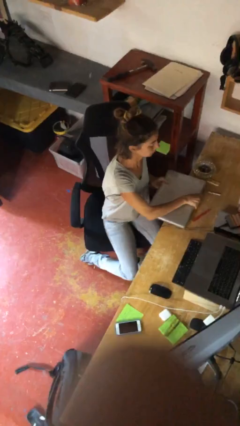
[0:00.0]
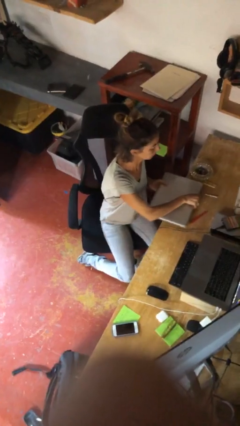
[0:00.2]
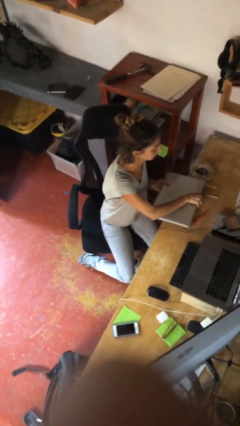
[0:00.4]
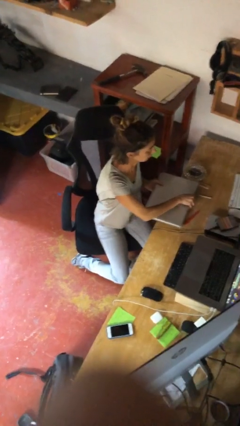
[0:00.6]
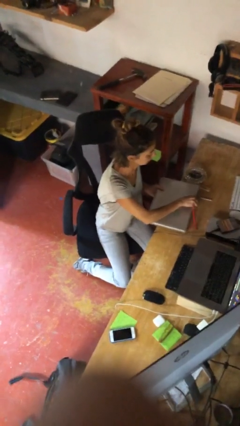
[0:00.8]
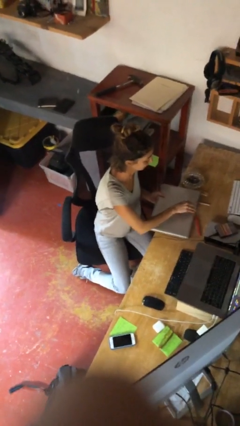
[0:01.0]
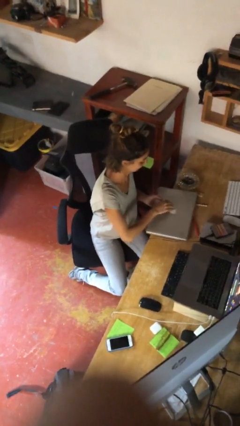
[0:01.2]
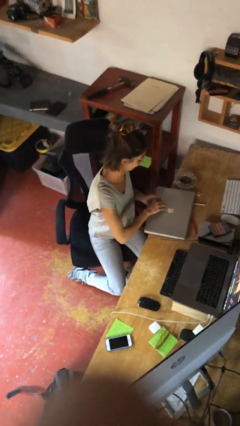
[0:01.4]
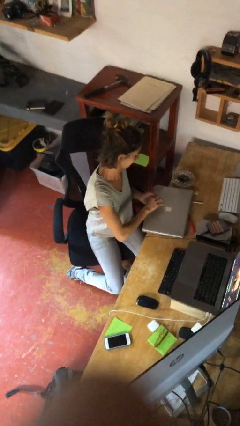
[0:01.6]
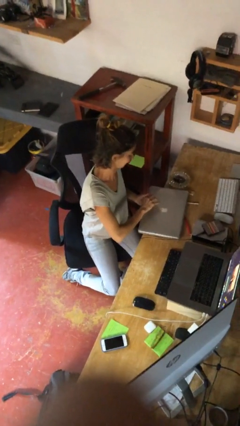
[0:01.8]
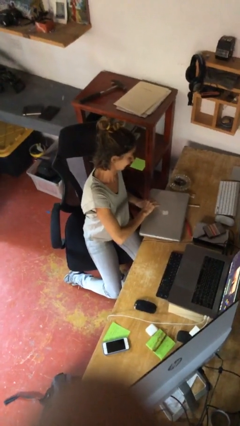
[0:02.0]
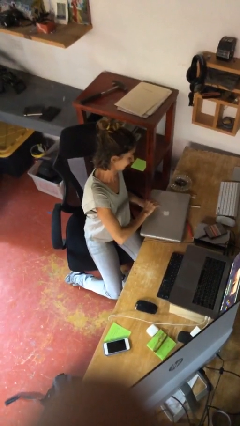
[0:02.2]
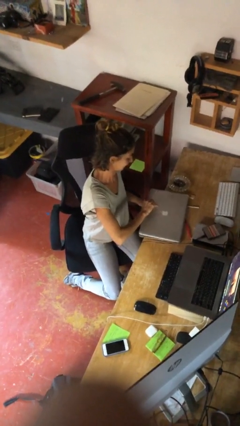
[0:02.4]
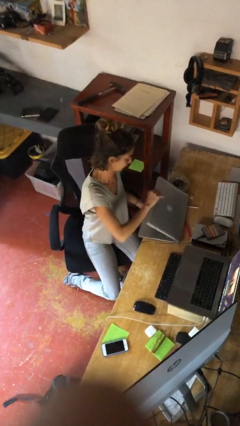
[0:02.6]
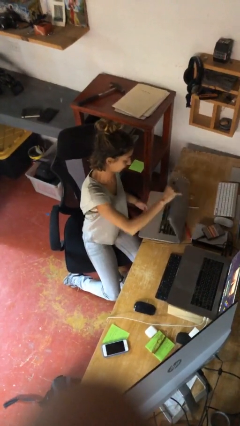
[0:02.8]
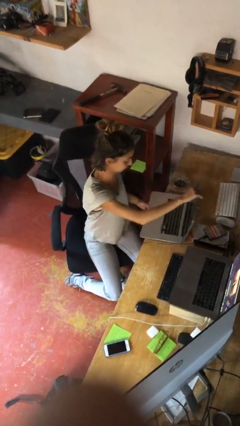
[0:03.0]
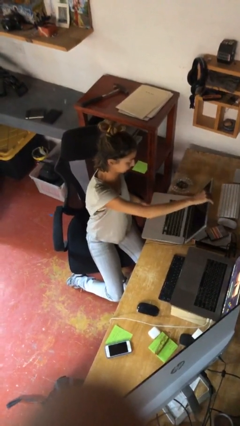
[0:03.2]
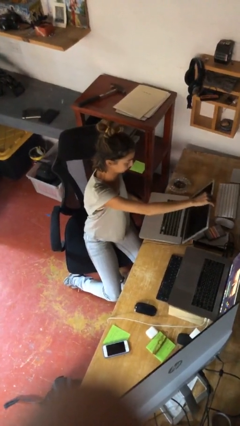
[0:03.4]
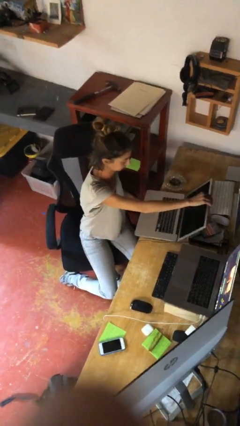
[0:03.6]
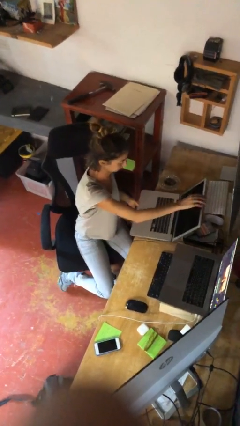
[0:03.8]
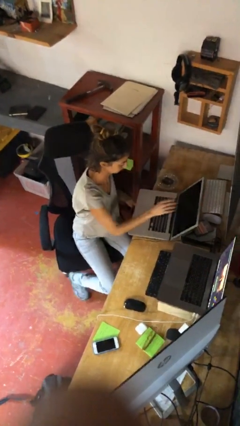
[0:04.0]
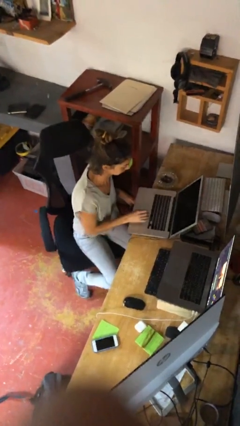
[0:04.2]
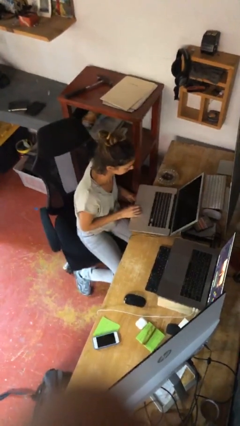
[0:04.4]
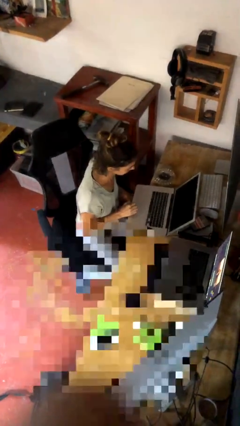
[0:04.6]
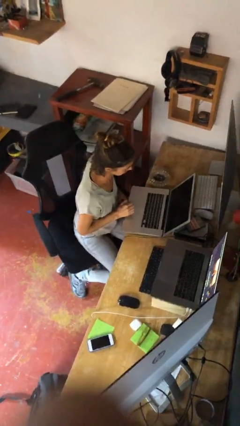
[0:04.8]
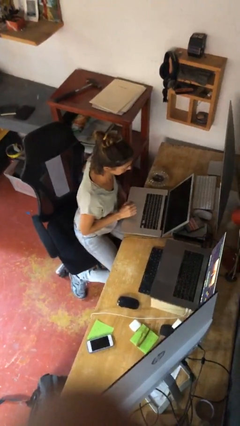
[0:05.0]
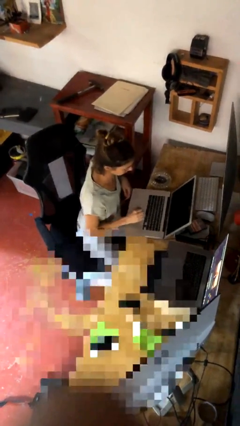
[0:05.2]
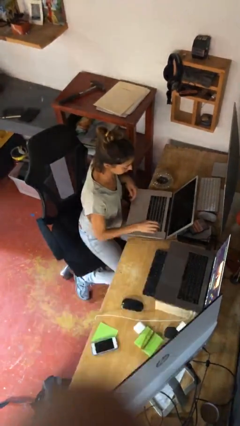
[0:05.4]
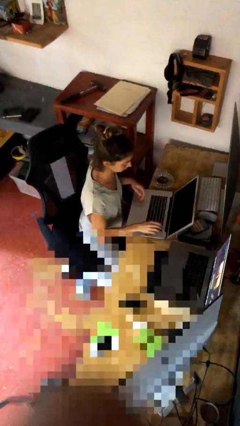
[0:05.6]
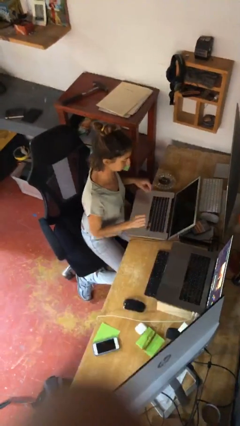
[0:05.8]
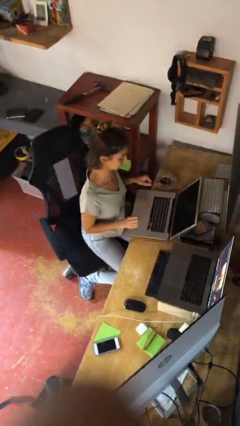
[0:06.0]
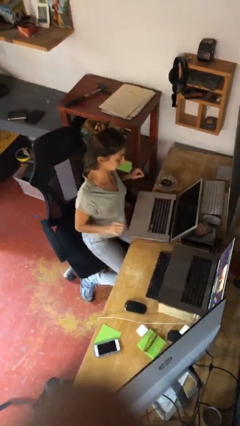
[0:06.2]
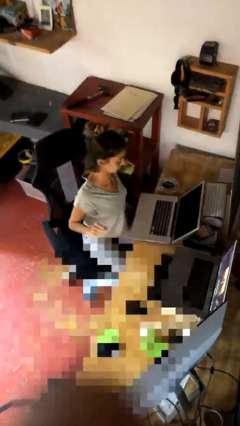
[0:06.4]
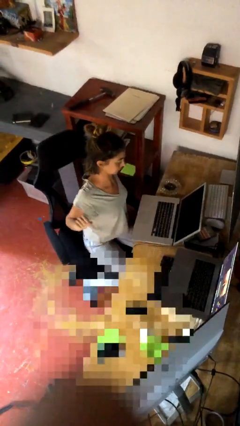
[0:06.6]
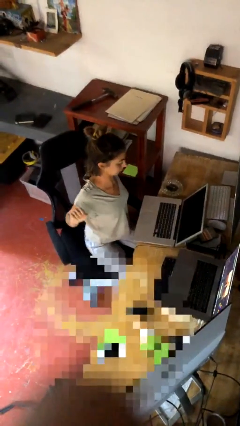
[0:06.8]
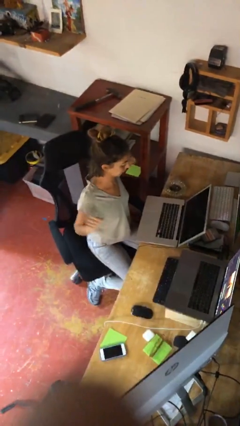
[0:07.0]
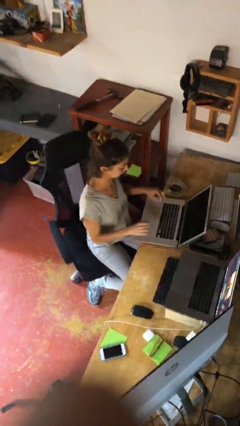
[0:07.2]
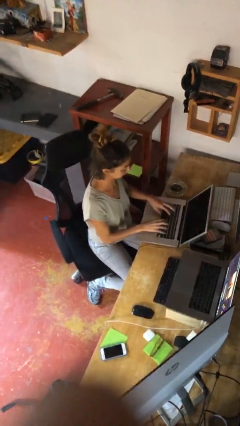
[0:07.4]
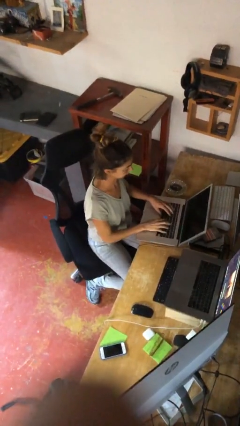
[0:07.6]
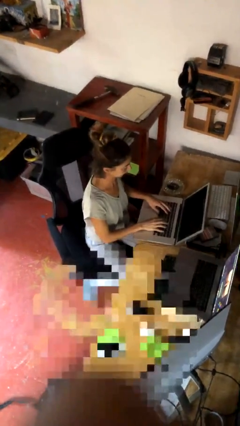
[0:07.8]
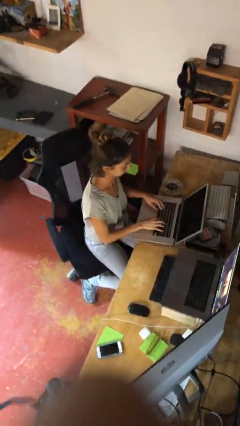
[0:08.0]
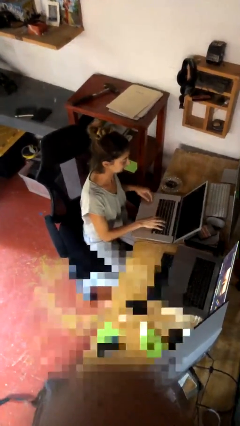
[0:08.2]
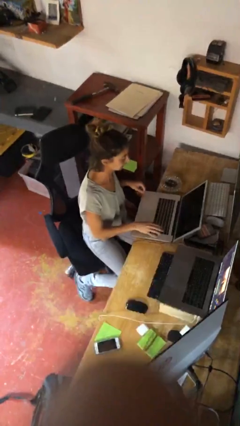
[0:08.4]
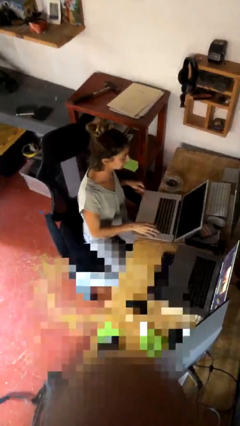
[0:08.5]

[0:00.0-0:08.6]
person interacts with laptop

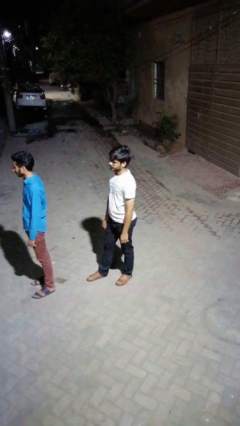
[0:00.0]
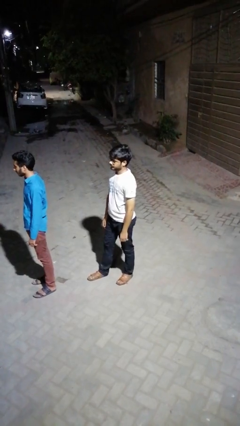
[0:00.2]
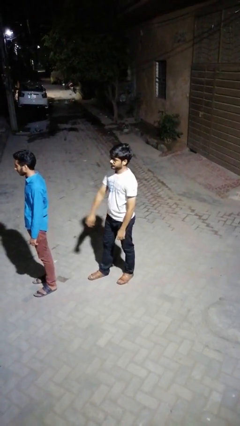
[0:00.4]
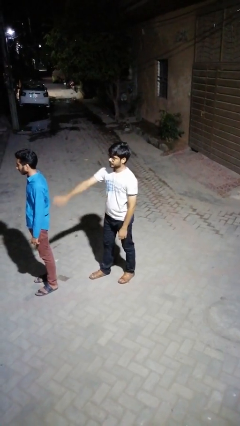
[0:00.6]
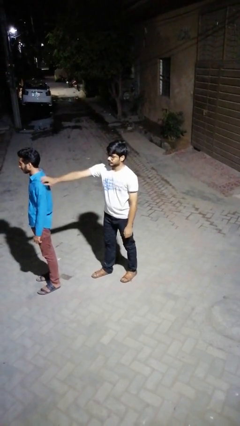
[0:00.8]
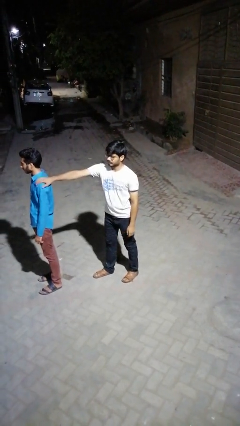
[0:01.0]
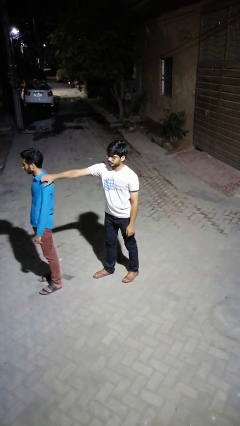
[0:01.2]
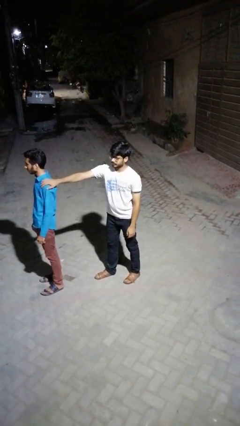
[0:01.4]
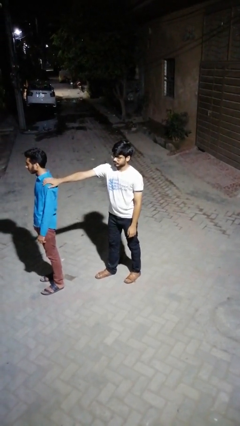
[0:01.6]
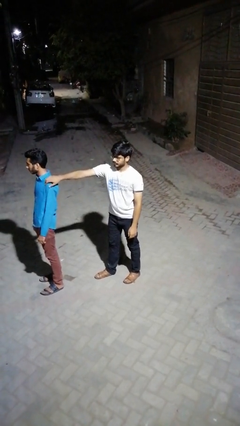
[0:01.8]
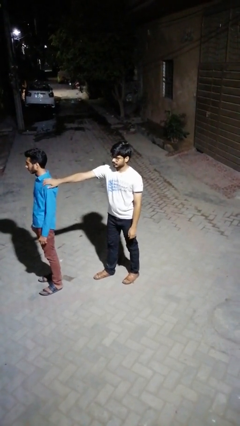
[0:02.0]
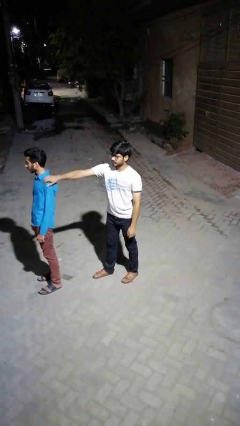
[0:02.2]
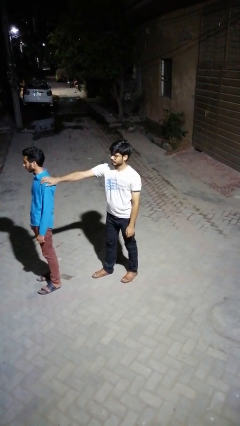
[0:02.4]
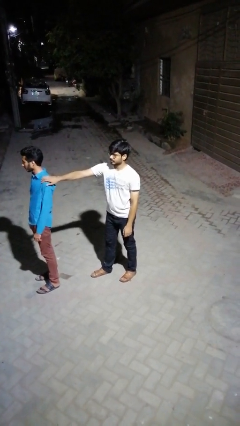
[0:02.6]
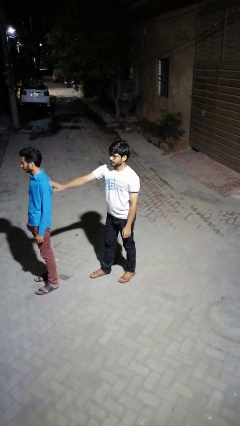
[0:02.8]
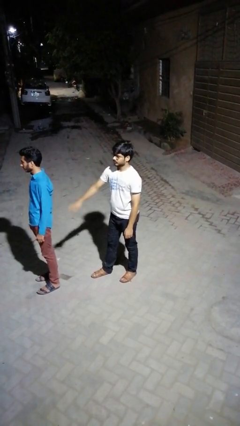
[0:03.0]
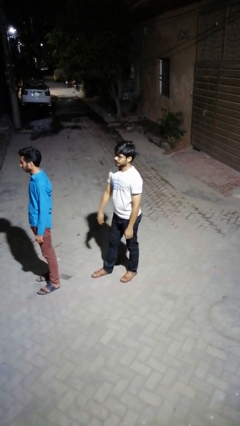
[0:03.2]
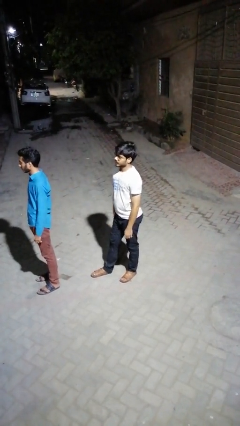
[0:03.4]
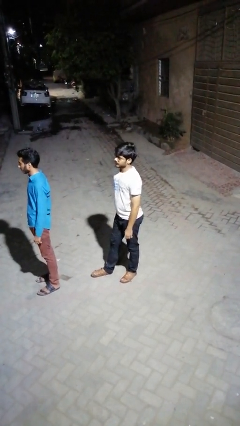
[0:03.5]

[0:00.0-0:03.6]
person touches back of person

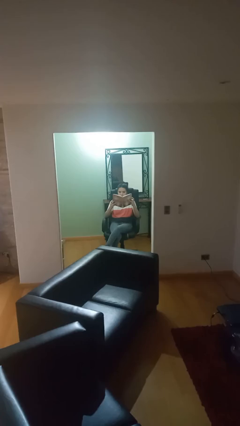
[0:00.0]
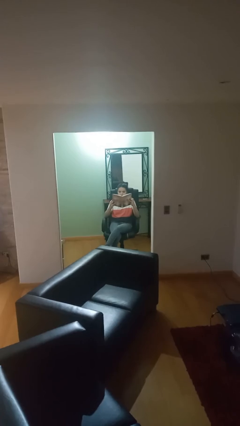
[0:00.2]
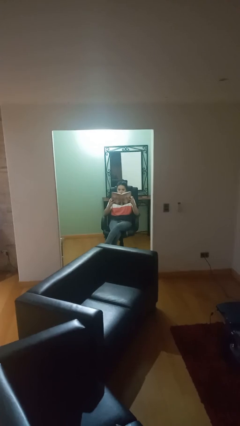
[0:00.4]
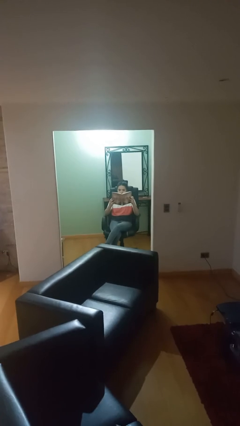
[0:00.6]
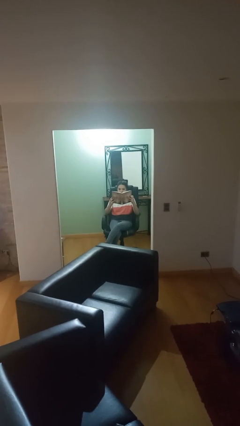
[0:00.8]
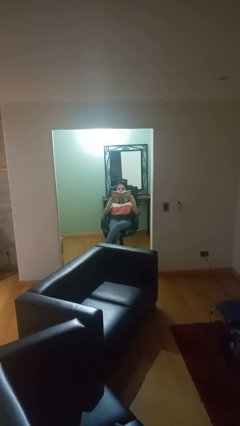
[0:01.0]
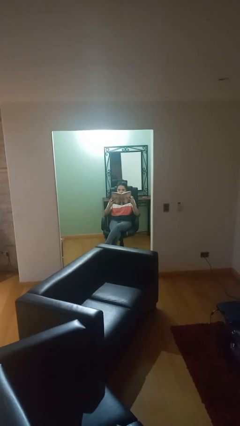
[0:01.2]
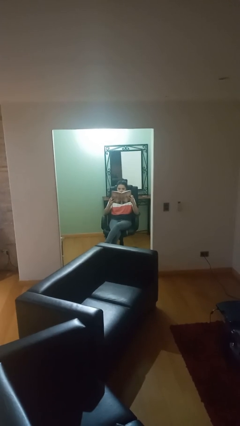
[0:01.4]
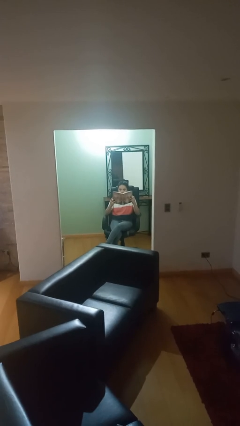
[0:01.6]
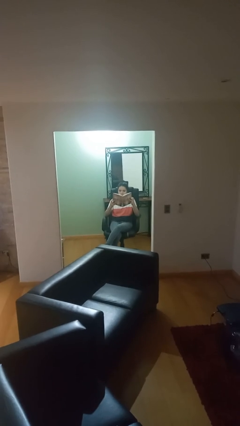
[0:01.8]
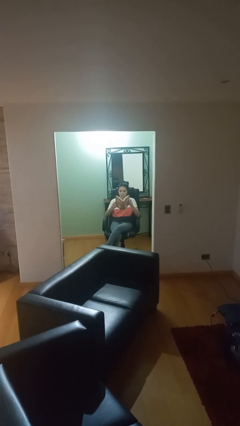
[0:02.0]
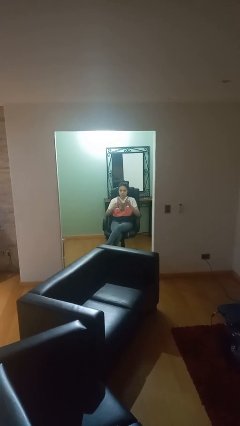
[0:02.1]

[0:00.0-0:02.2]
person reads document

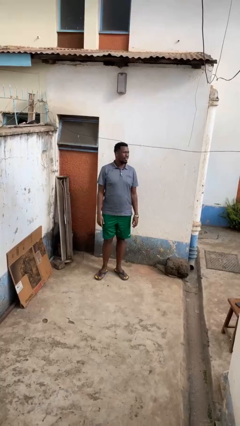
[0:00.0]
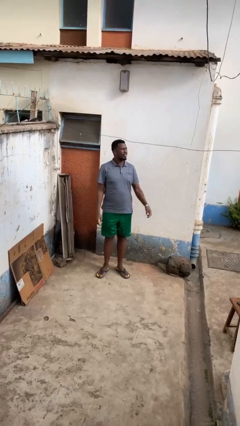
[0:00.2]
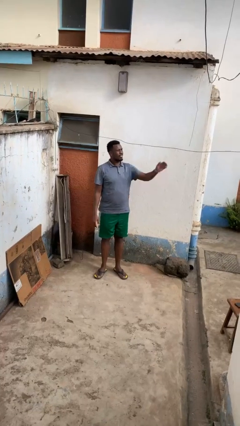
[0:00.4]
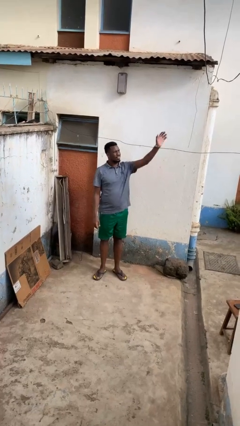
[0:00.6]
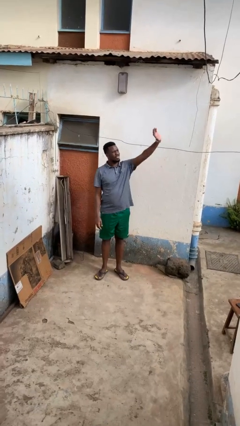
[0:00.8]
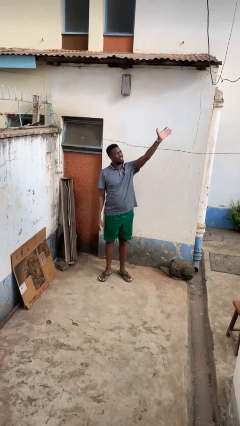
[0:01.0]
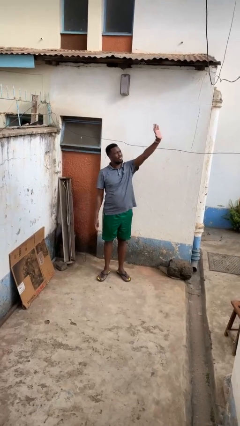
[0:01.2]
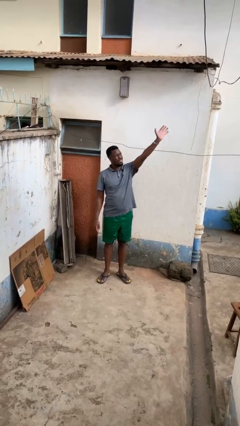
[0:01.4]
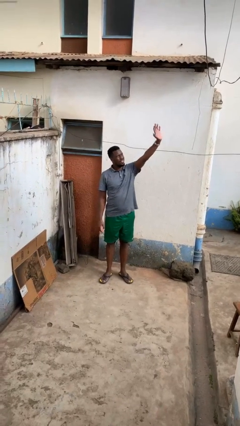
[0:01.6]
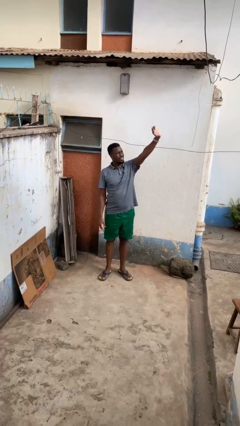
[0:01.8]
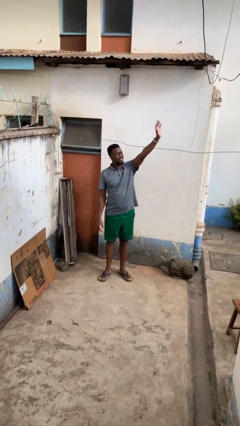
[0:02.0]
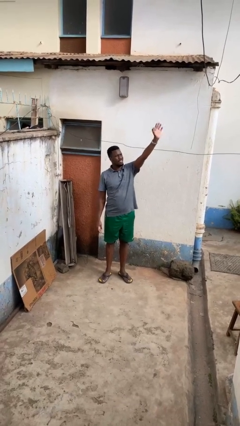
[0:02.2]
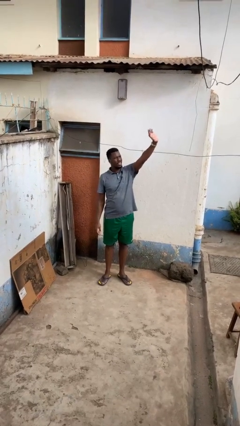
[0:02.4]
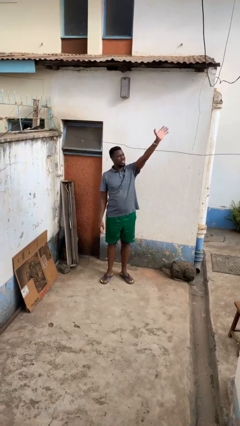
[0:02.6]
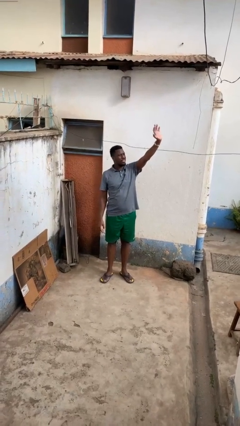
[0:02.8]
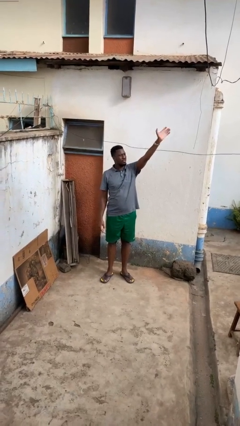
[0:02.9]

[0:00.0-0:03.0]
person waves at person

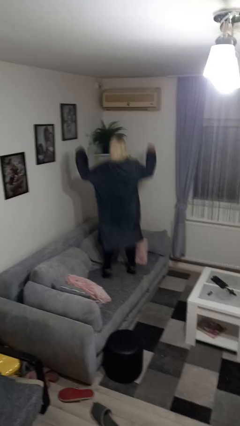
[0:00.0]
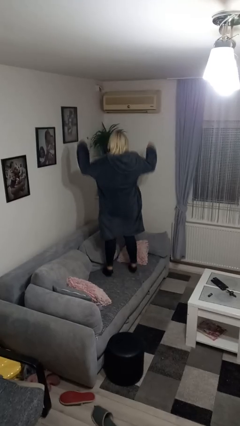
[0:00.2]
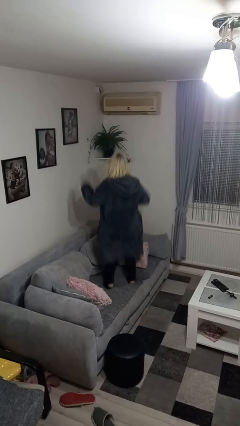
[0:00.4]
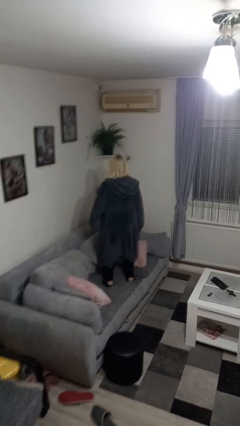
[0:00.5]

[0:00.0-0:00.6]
person jumps on couch
